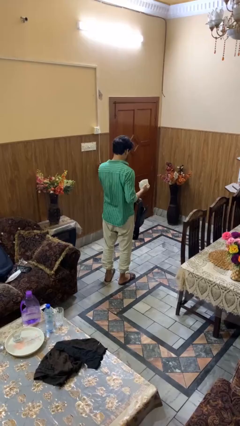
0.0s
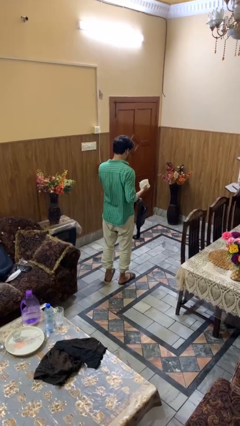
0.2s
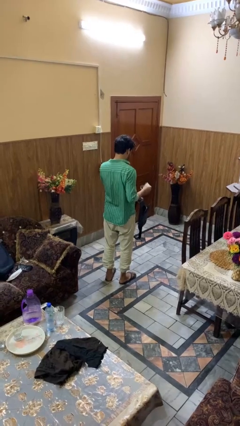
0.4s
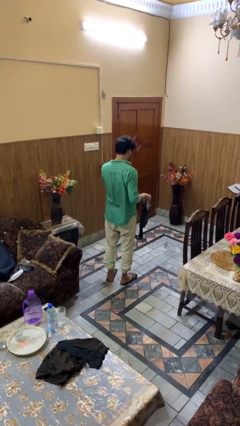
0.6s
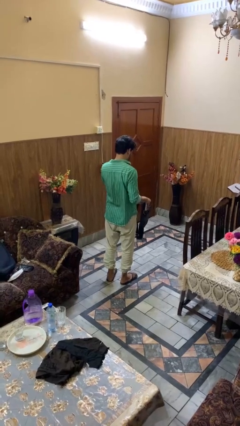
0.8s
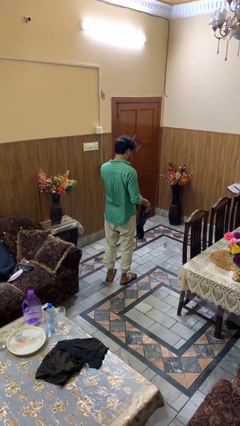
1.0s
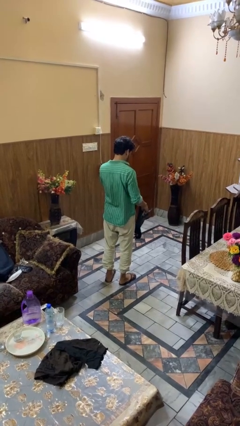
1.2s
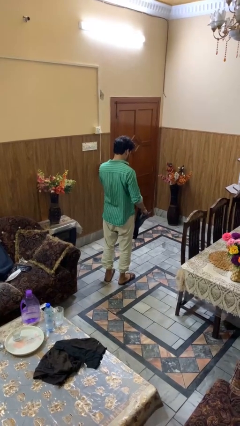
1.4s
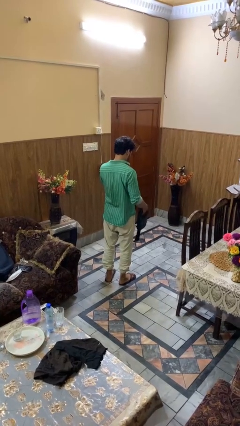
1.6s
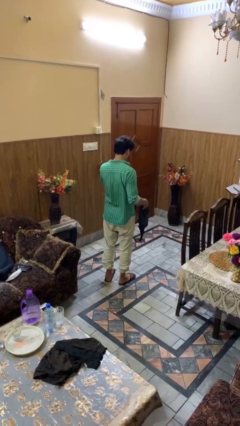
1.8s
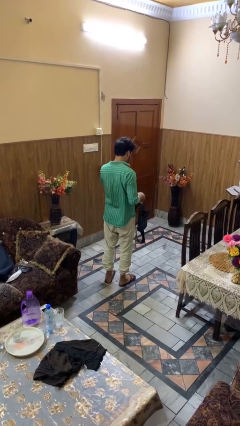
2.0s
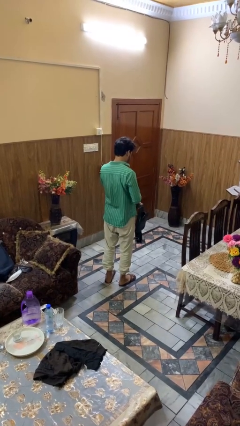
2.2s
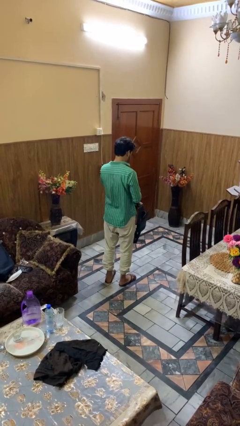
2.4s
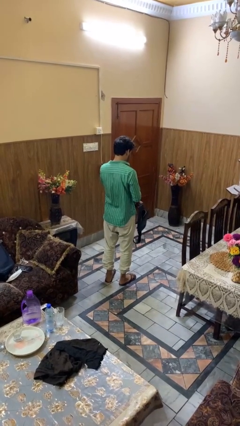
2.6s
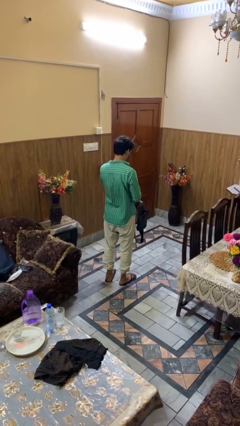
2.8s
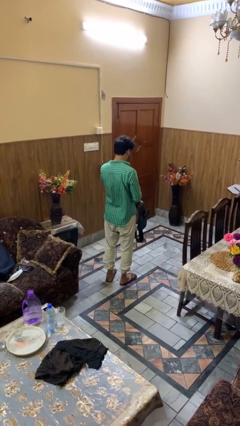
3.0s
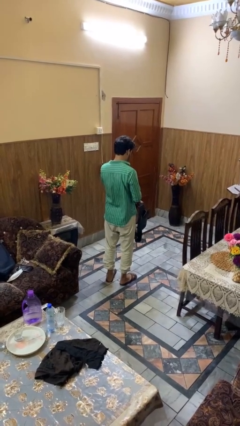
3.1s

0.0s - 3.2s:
person puts object into purse

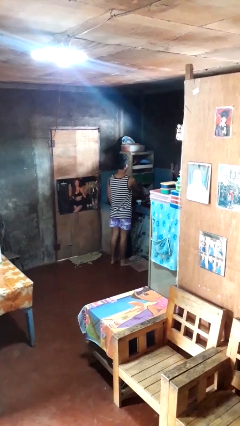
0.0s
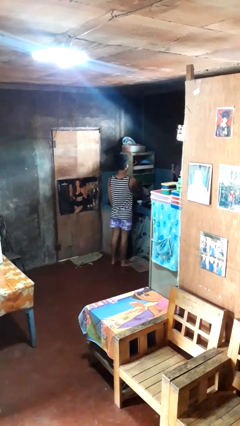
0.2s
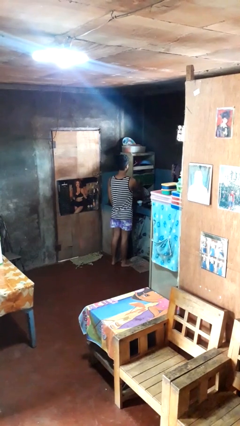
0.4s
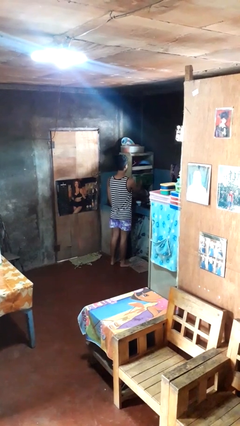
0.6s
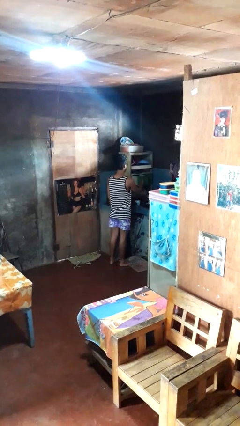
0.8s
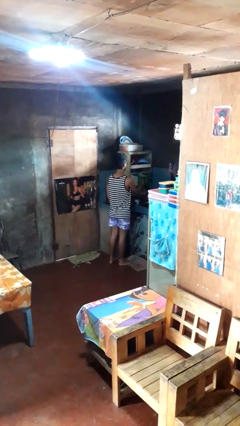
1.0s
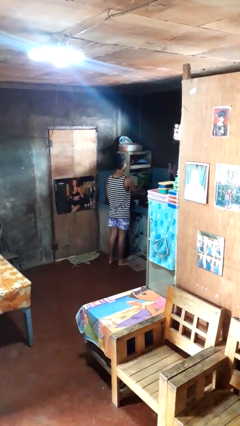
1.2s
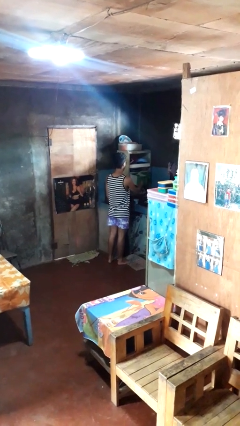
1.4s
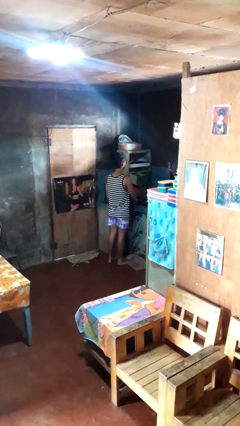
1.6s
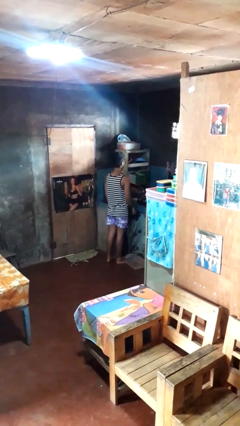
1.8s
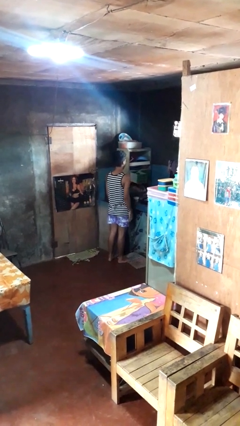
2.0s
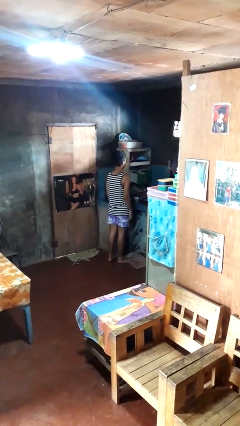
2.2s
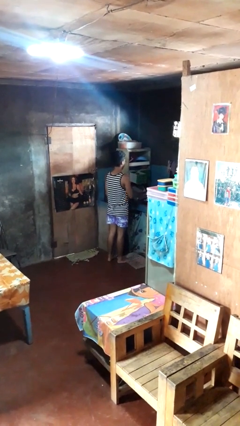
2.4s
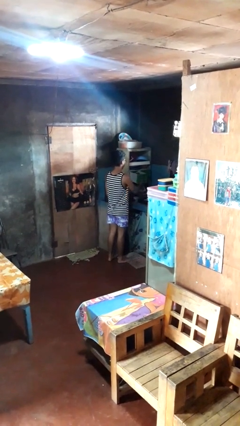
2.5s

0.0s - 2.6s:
person opens kitchen drawer

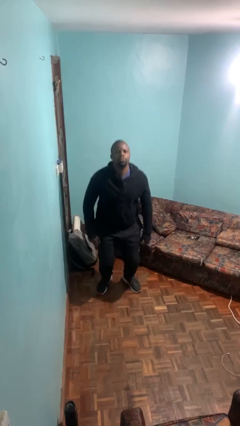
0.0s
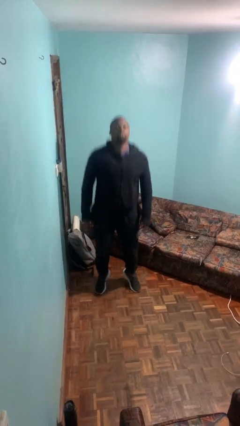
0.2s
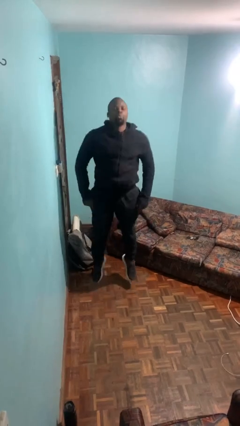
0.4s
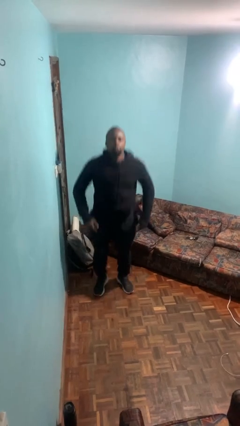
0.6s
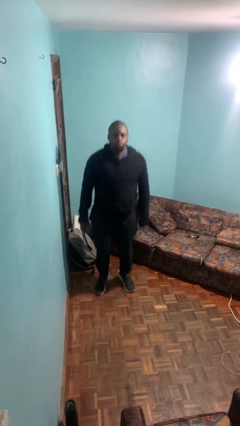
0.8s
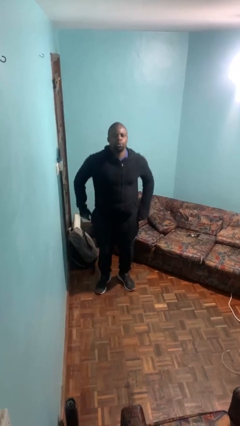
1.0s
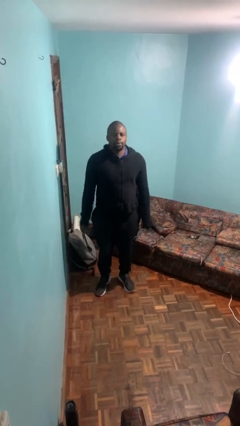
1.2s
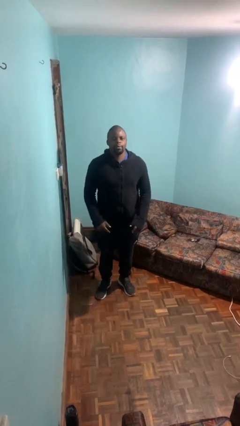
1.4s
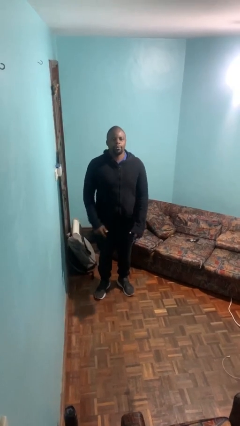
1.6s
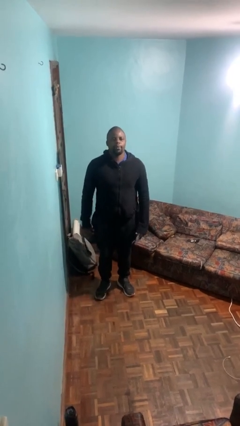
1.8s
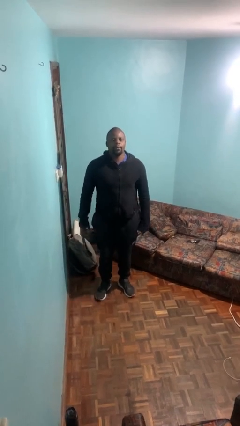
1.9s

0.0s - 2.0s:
person jumps

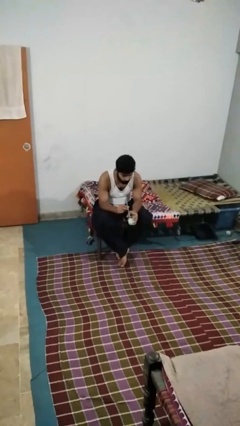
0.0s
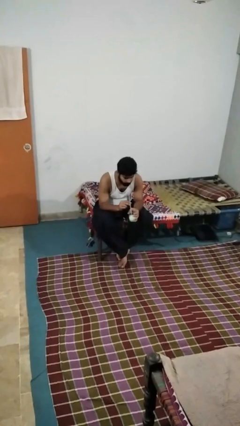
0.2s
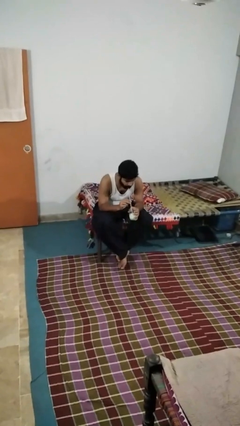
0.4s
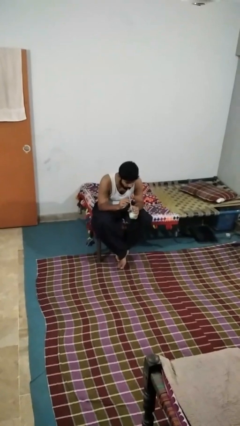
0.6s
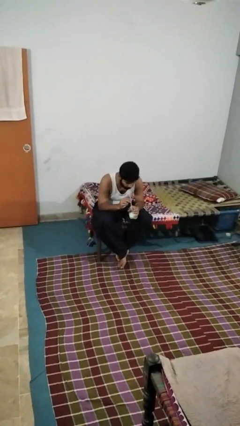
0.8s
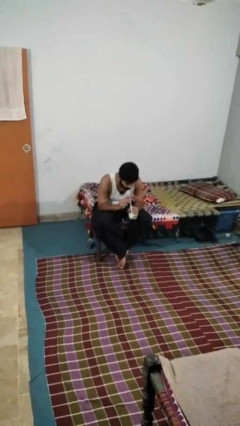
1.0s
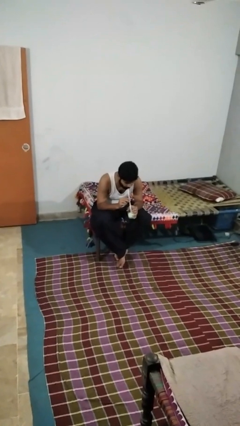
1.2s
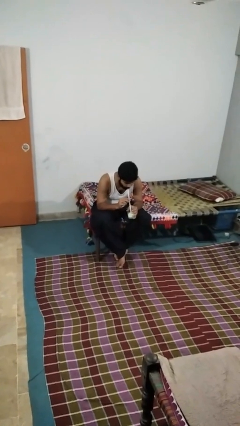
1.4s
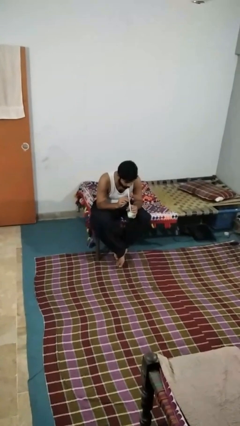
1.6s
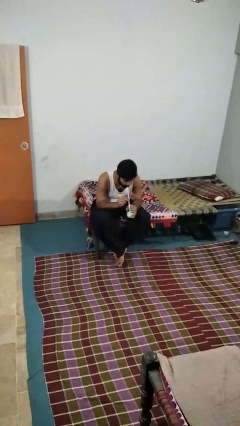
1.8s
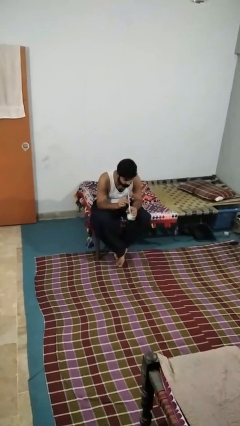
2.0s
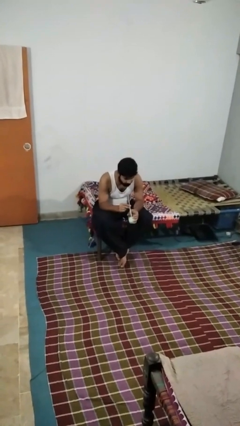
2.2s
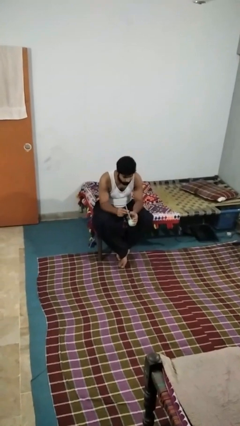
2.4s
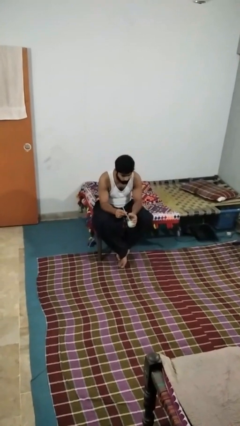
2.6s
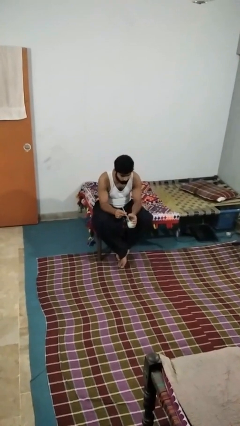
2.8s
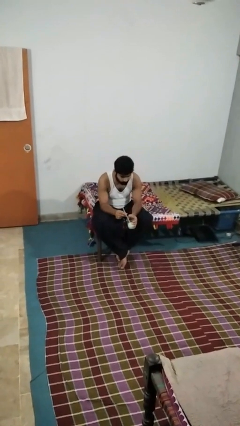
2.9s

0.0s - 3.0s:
person drinks from straw

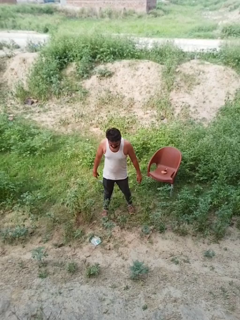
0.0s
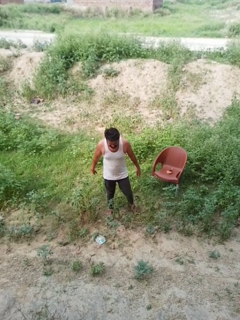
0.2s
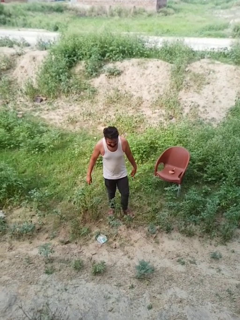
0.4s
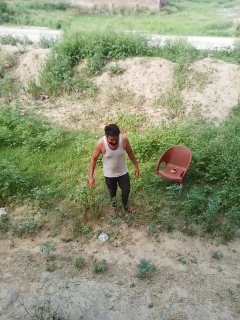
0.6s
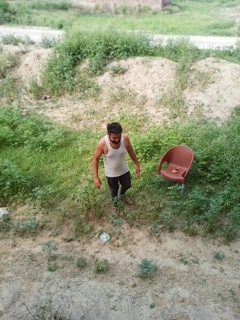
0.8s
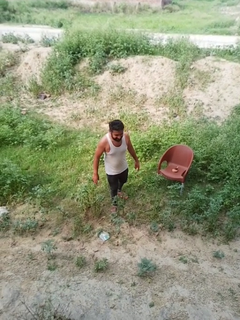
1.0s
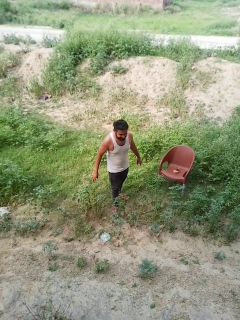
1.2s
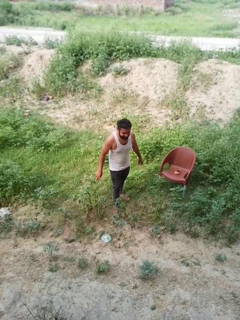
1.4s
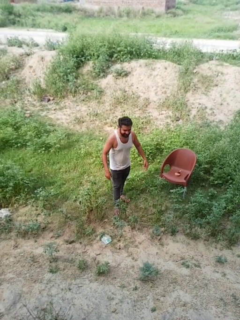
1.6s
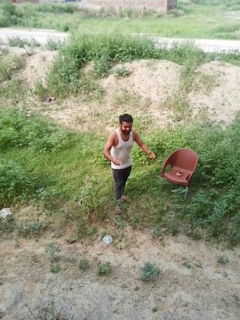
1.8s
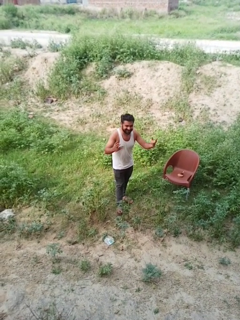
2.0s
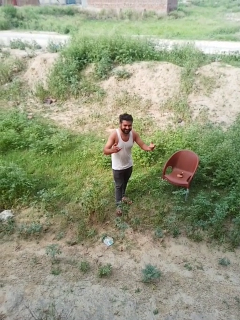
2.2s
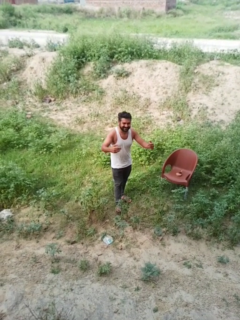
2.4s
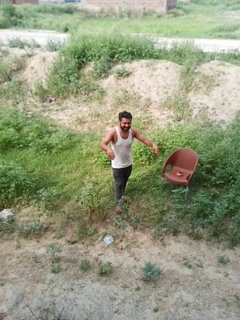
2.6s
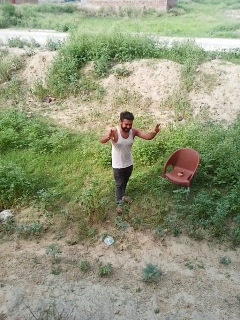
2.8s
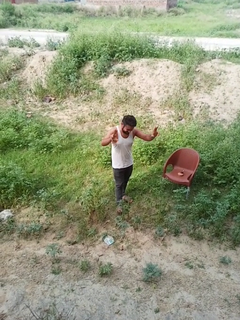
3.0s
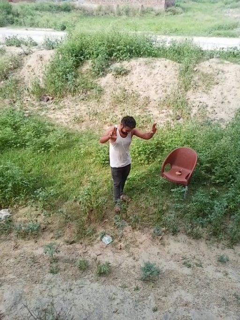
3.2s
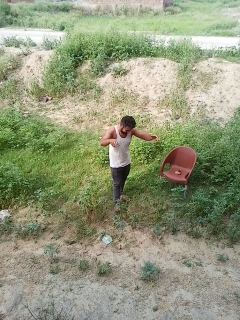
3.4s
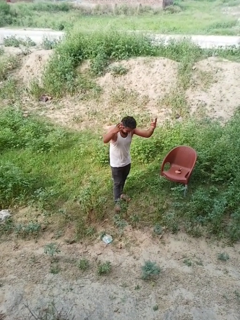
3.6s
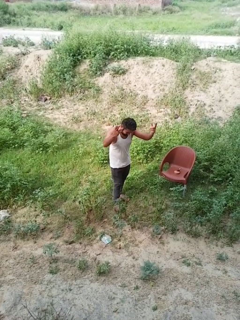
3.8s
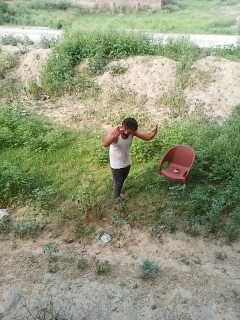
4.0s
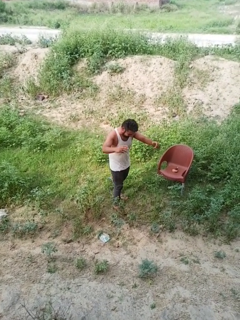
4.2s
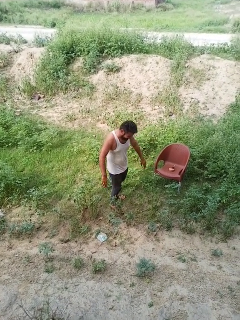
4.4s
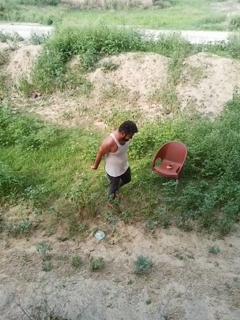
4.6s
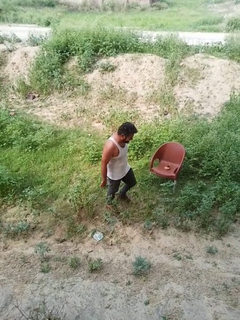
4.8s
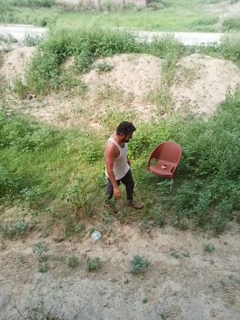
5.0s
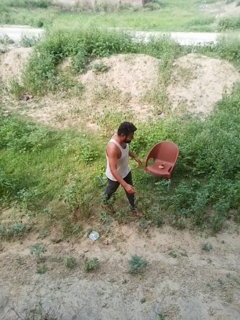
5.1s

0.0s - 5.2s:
person dances in place

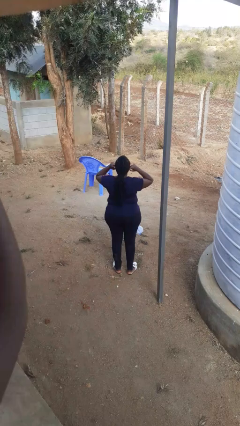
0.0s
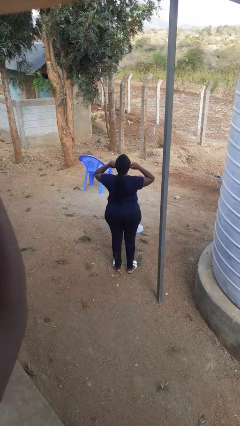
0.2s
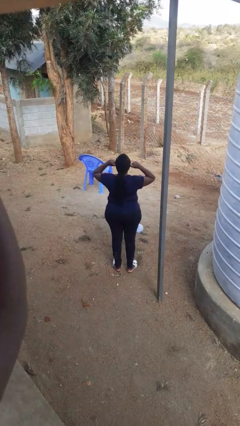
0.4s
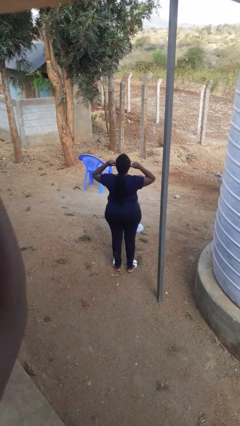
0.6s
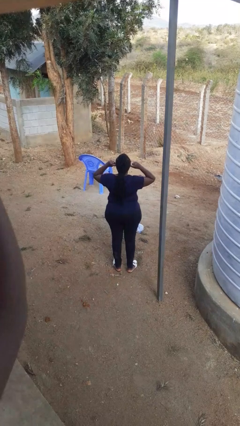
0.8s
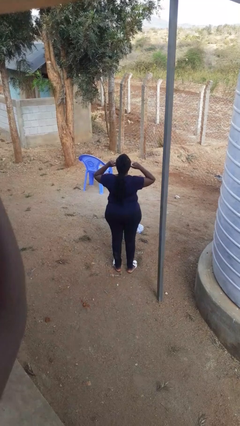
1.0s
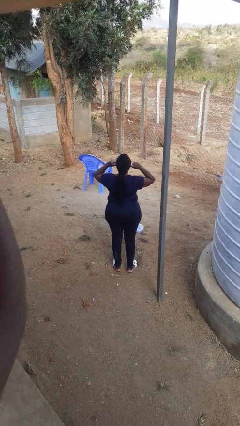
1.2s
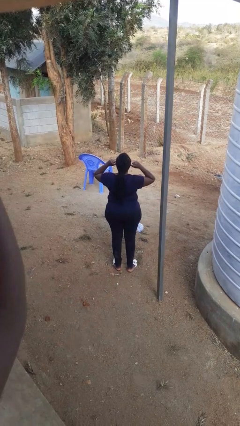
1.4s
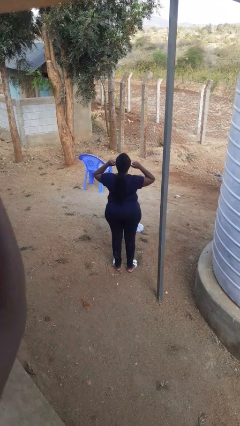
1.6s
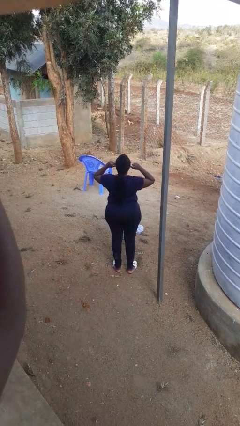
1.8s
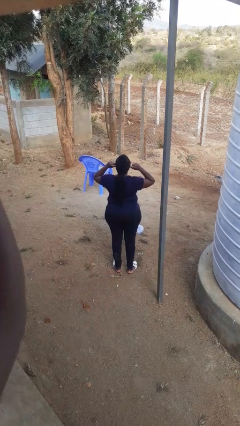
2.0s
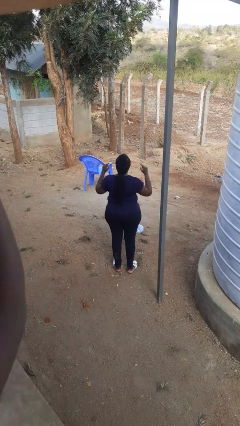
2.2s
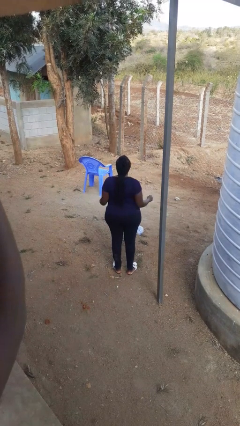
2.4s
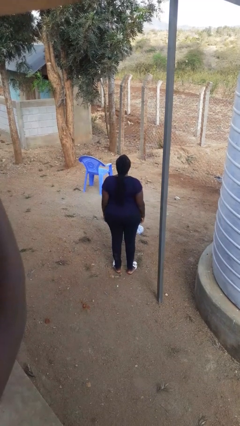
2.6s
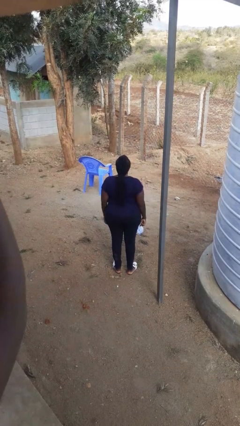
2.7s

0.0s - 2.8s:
person puts fingers in ear
